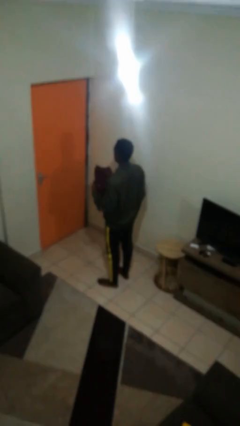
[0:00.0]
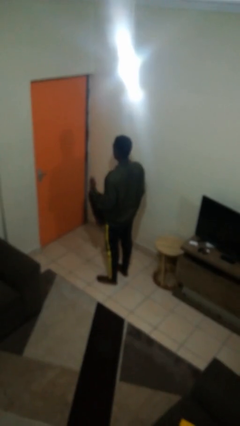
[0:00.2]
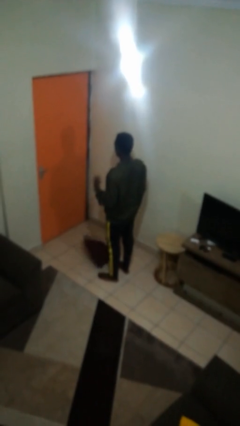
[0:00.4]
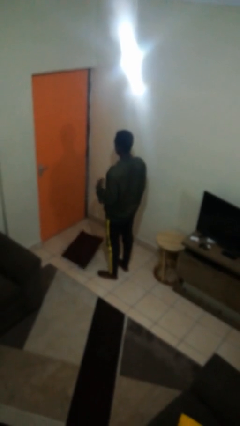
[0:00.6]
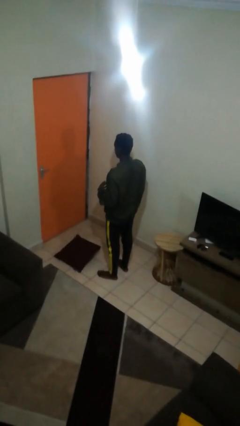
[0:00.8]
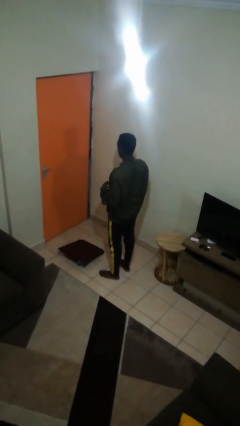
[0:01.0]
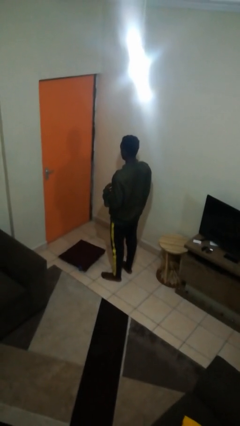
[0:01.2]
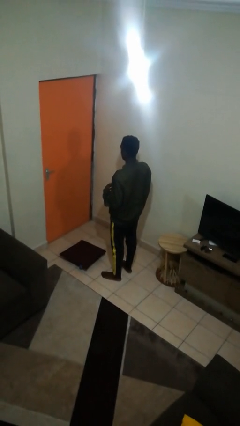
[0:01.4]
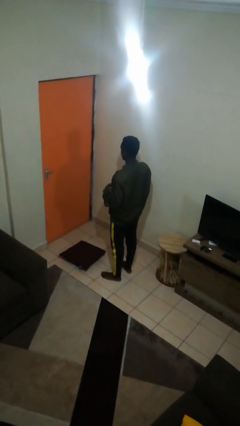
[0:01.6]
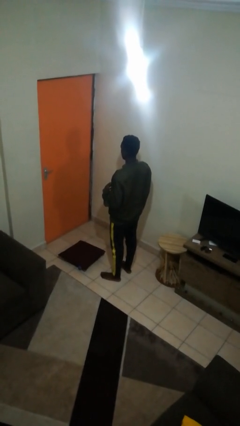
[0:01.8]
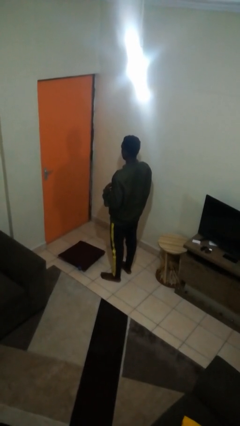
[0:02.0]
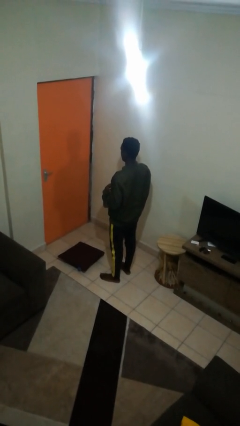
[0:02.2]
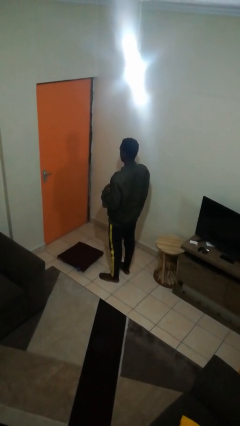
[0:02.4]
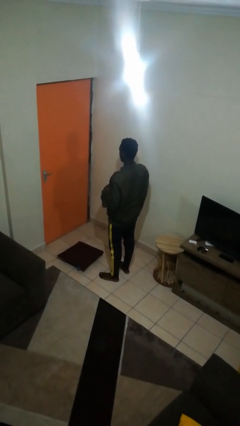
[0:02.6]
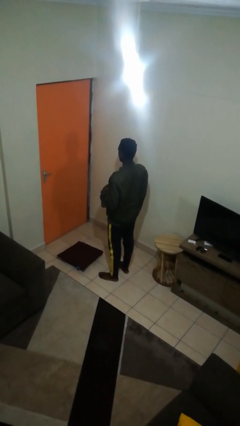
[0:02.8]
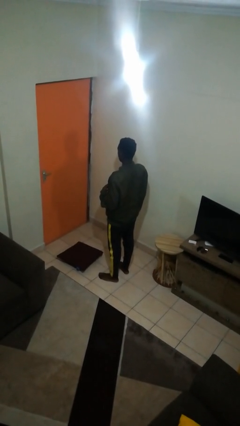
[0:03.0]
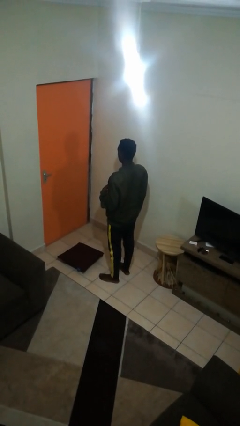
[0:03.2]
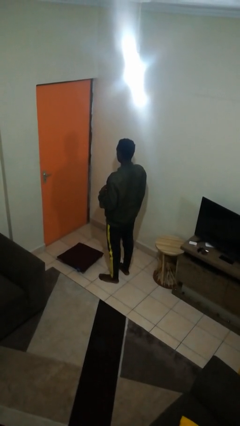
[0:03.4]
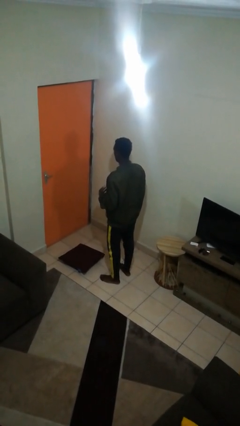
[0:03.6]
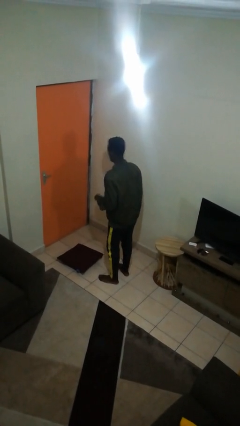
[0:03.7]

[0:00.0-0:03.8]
person drops object

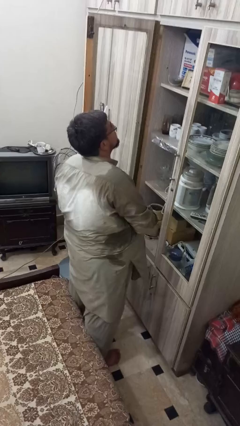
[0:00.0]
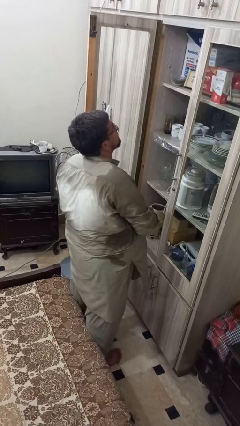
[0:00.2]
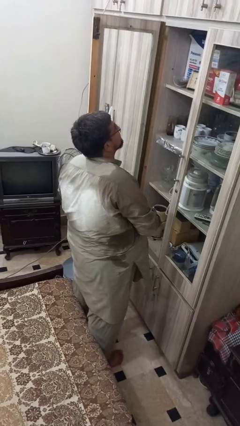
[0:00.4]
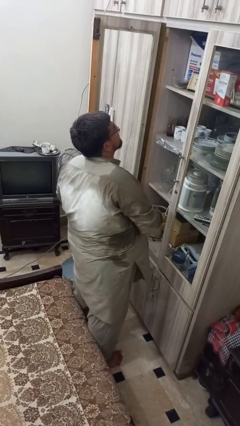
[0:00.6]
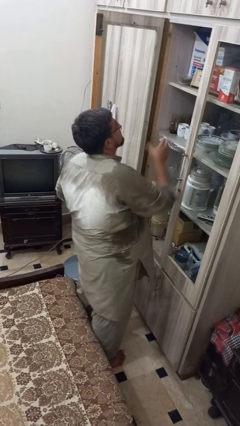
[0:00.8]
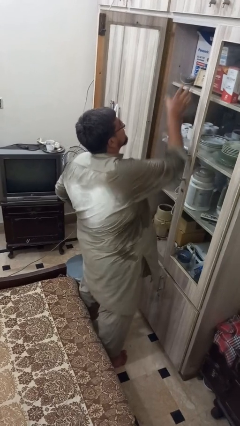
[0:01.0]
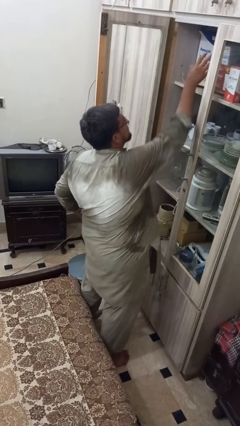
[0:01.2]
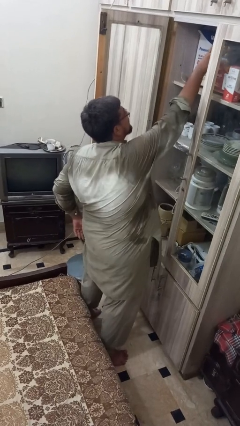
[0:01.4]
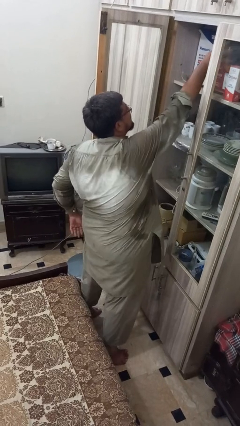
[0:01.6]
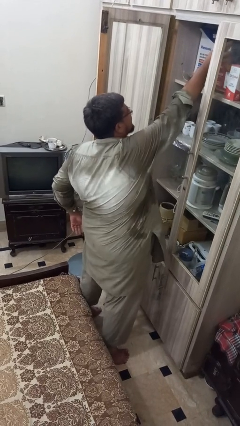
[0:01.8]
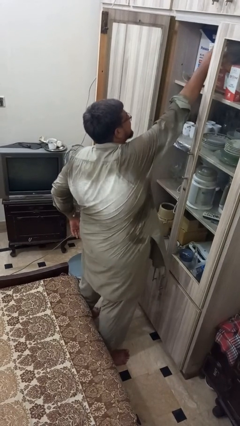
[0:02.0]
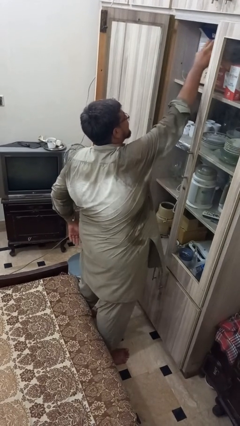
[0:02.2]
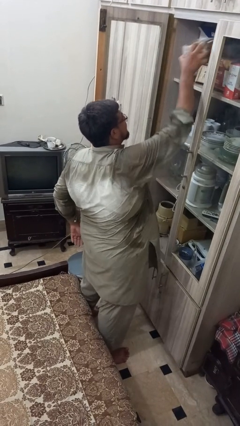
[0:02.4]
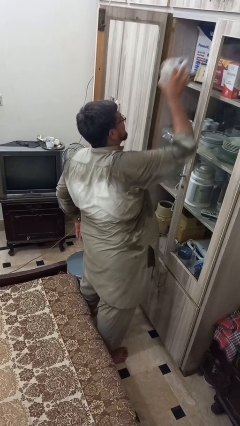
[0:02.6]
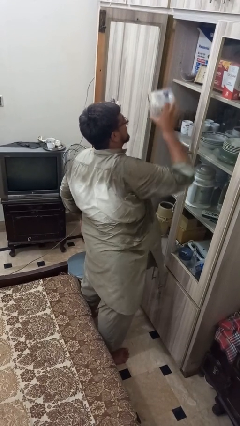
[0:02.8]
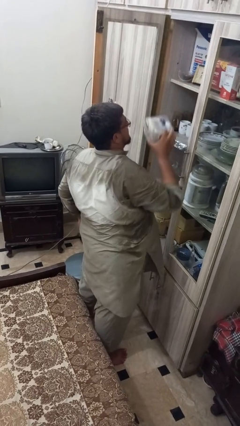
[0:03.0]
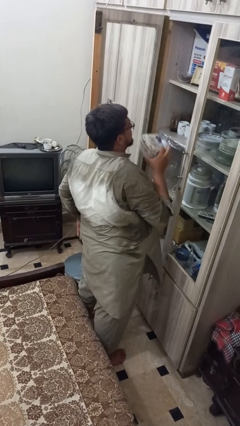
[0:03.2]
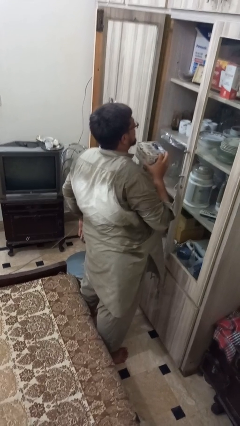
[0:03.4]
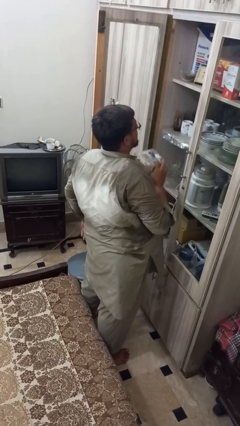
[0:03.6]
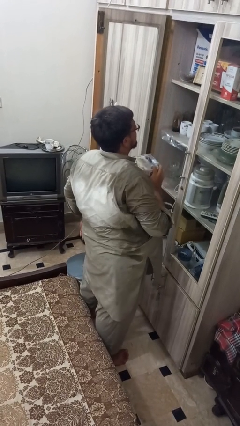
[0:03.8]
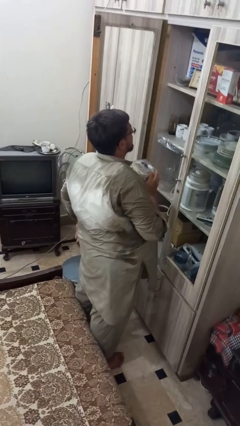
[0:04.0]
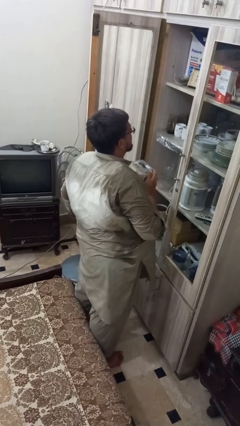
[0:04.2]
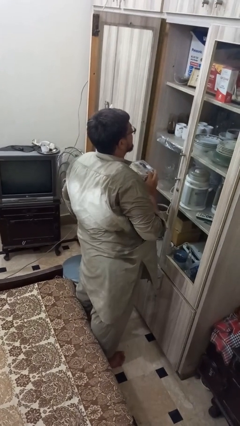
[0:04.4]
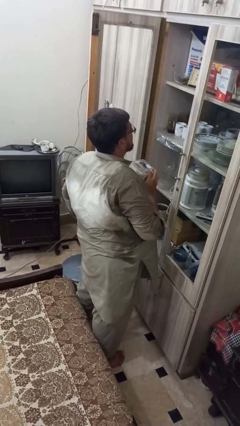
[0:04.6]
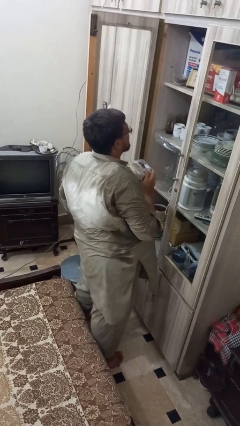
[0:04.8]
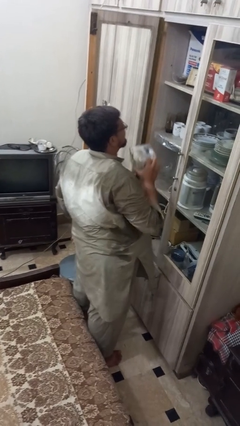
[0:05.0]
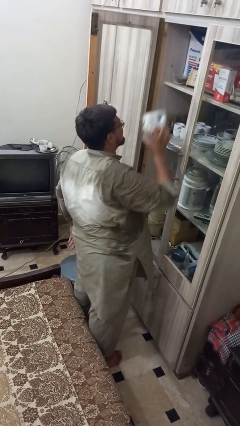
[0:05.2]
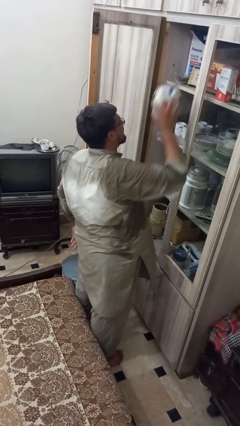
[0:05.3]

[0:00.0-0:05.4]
person picks up object from shelf

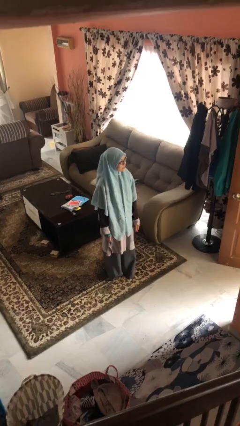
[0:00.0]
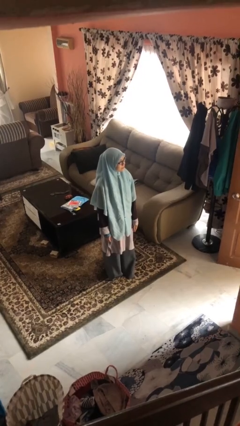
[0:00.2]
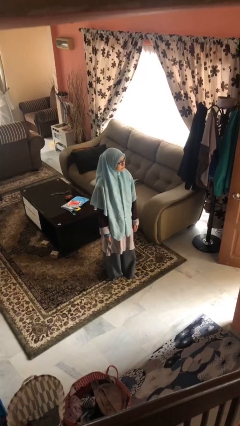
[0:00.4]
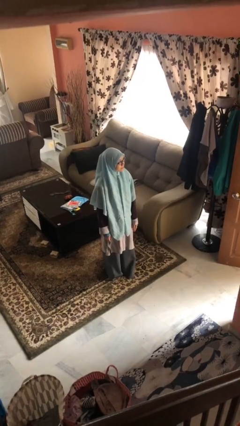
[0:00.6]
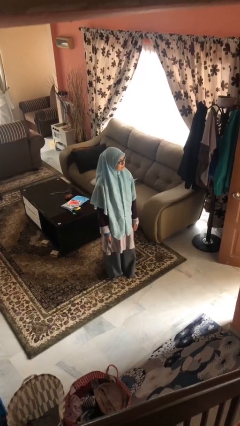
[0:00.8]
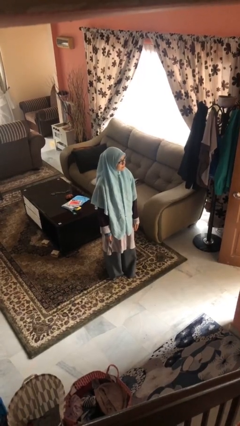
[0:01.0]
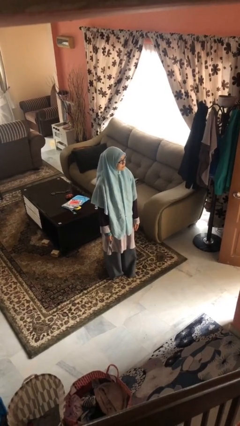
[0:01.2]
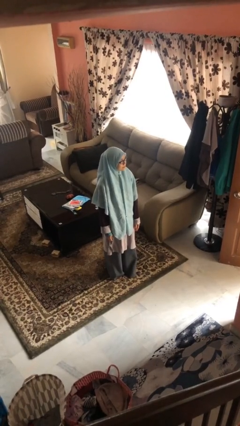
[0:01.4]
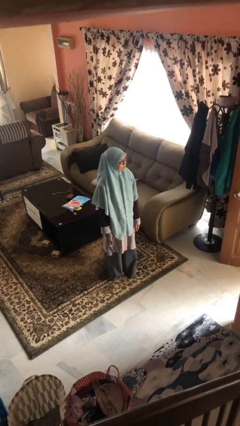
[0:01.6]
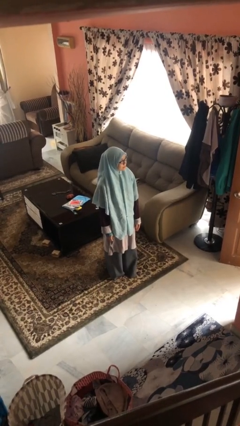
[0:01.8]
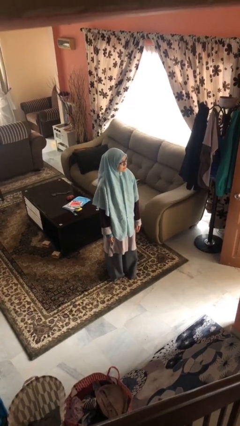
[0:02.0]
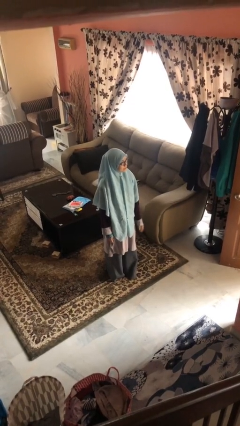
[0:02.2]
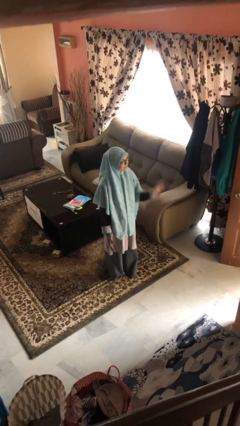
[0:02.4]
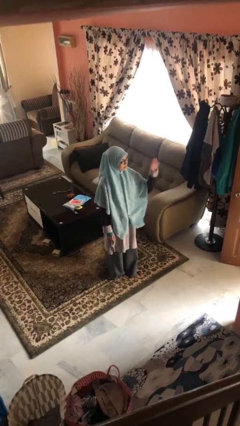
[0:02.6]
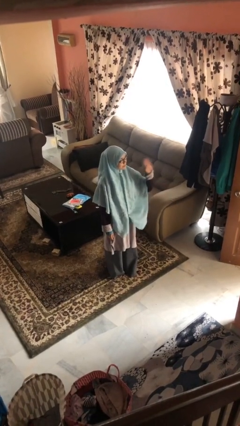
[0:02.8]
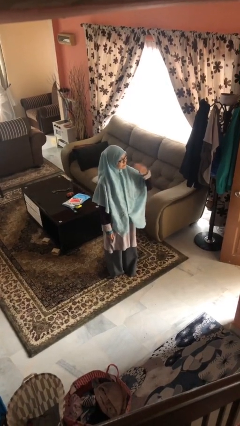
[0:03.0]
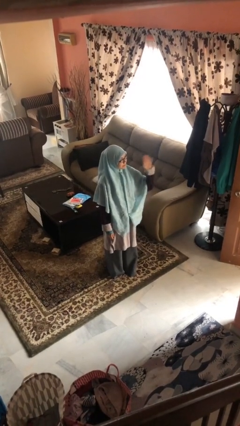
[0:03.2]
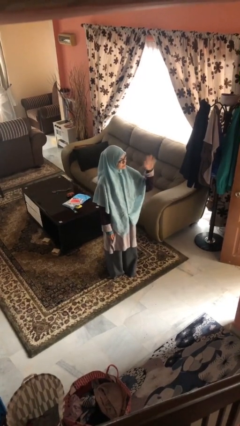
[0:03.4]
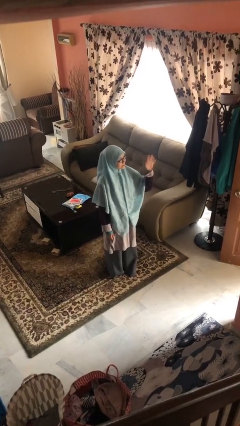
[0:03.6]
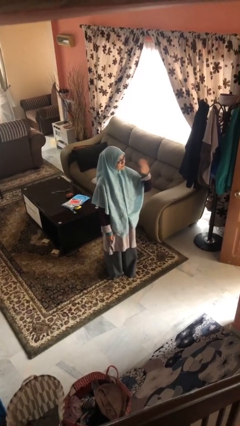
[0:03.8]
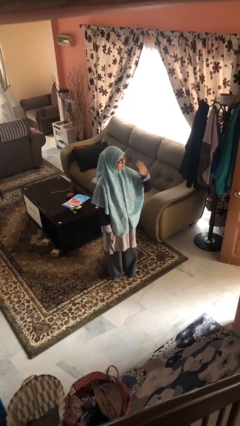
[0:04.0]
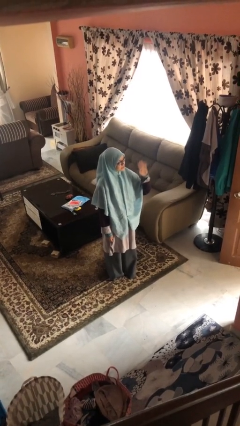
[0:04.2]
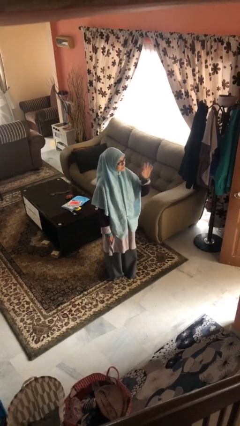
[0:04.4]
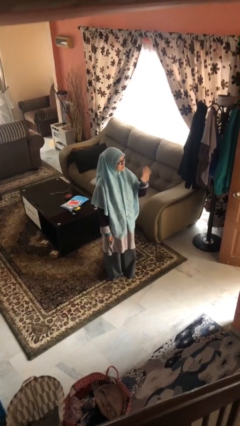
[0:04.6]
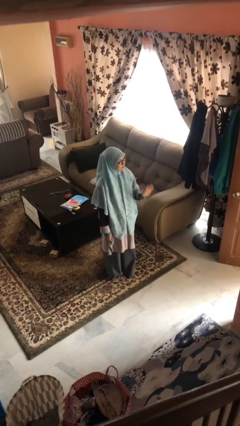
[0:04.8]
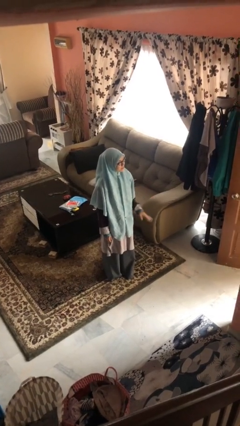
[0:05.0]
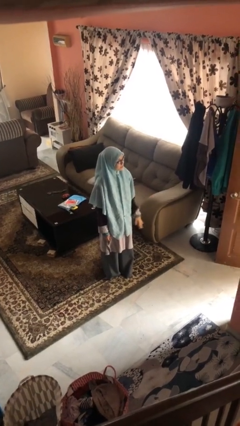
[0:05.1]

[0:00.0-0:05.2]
person waves at person

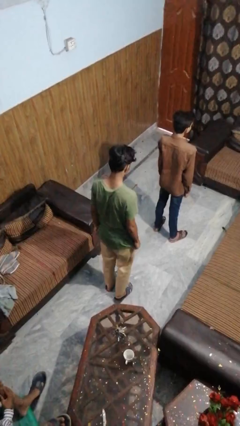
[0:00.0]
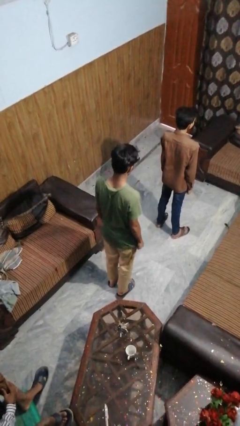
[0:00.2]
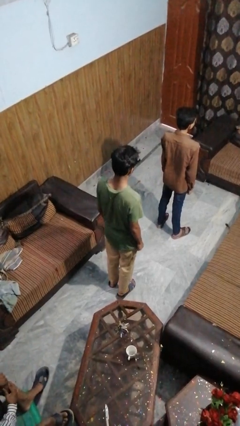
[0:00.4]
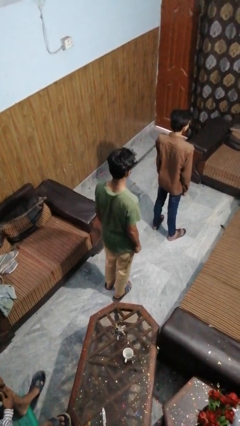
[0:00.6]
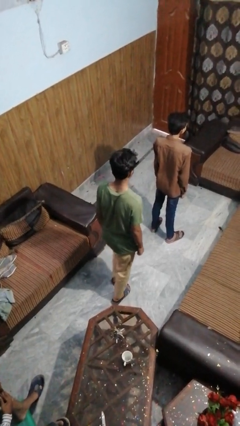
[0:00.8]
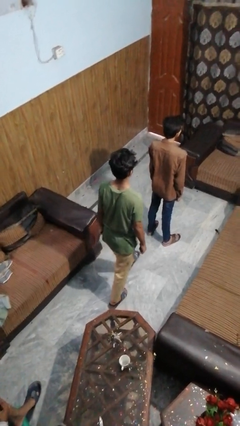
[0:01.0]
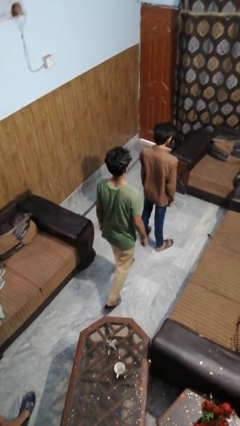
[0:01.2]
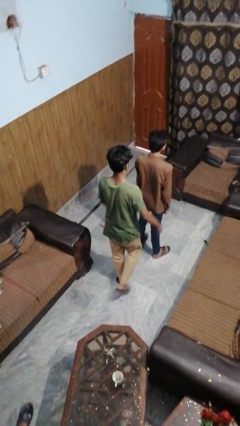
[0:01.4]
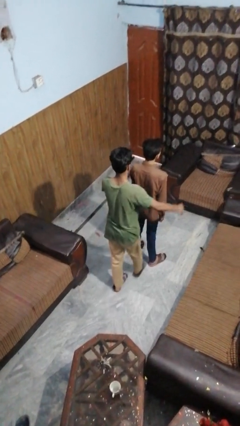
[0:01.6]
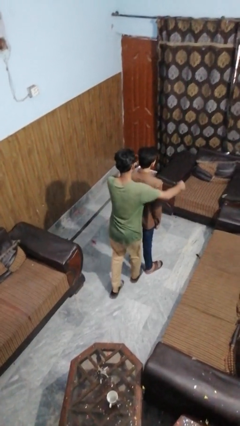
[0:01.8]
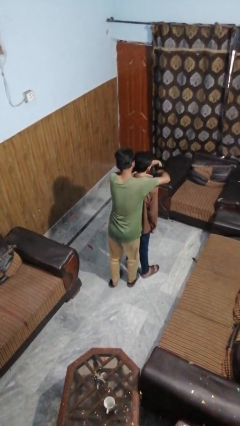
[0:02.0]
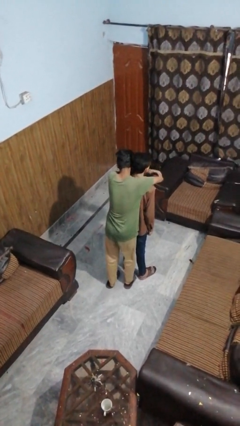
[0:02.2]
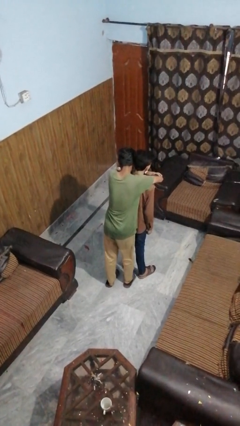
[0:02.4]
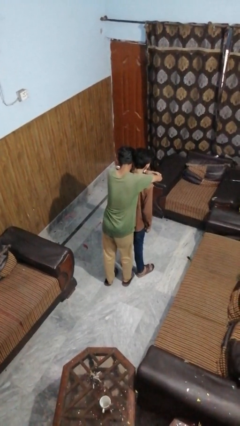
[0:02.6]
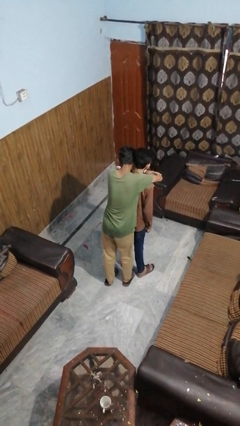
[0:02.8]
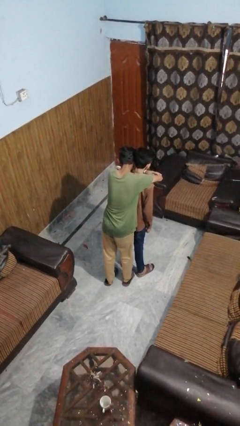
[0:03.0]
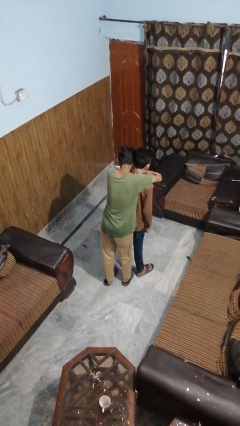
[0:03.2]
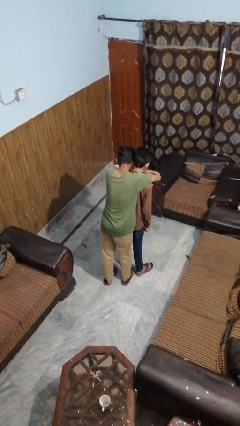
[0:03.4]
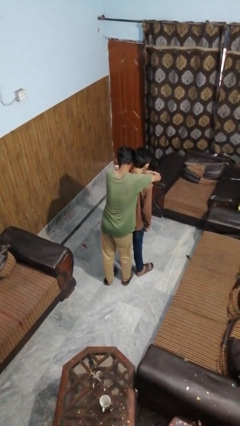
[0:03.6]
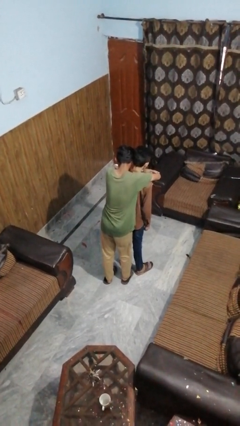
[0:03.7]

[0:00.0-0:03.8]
person hugs person from behind

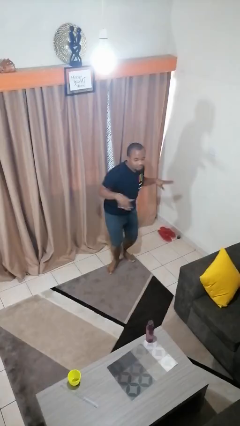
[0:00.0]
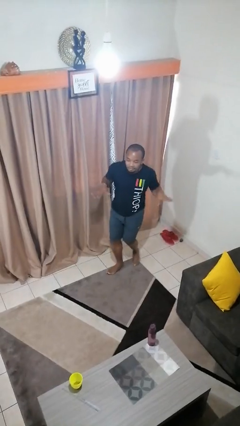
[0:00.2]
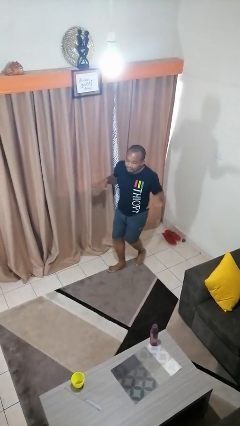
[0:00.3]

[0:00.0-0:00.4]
person throws object into air
